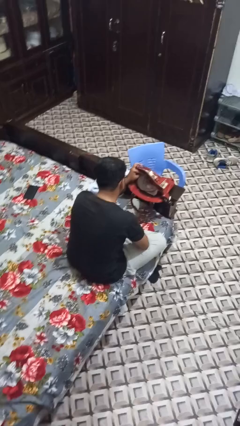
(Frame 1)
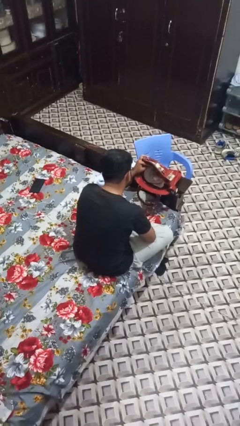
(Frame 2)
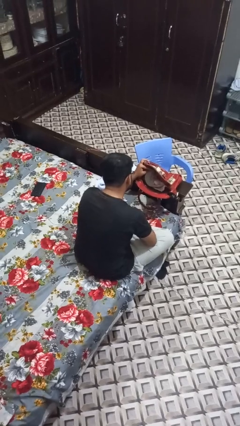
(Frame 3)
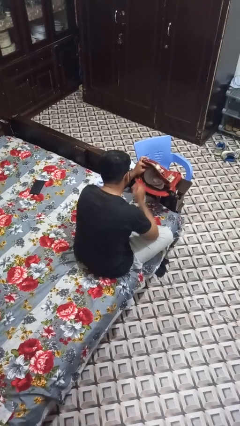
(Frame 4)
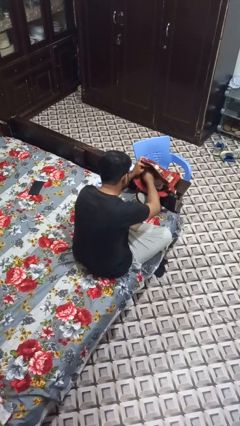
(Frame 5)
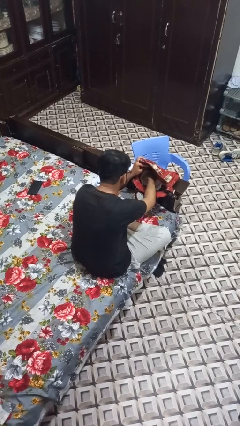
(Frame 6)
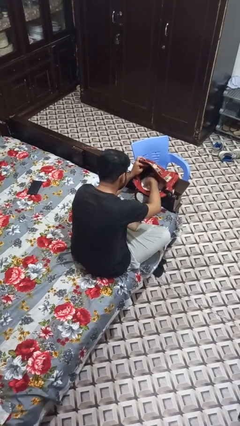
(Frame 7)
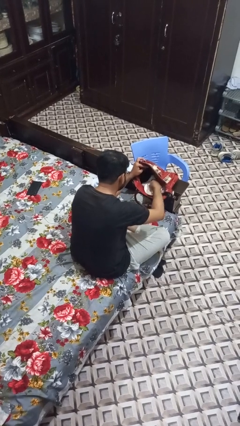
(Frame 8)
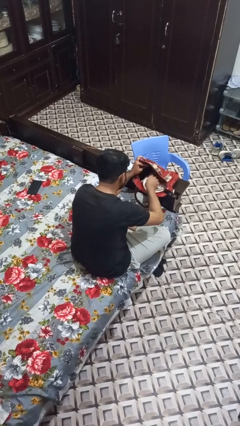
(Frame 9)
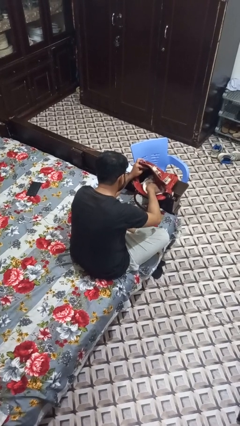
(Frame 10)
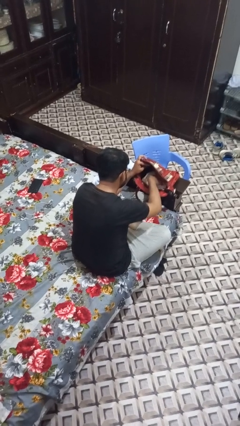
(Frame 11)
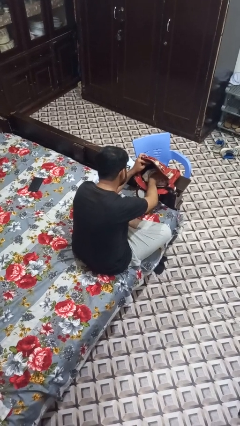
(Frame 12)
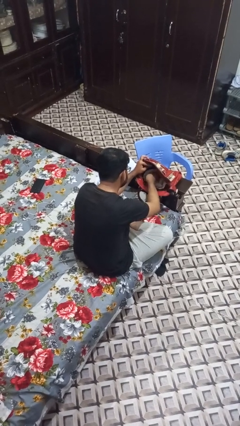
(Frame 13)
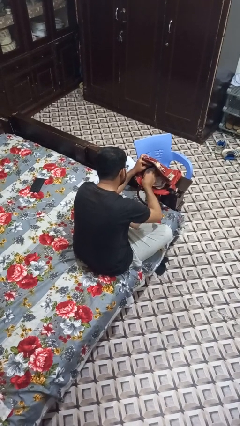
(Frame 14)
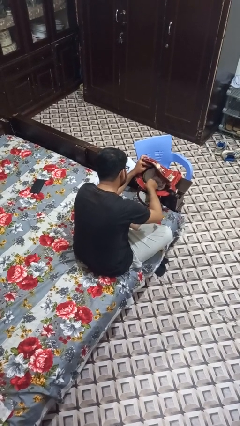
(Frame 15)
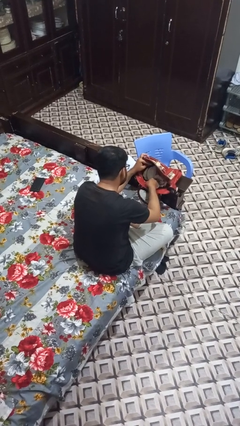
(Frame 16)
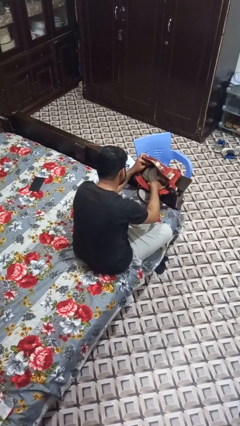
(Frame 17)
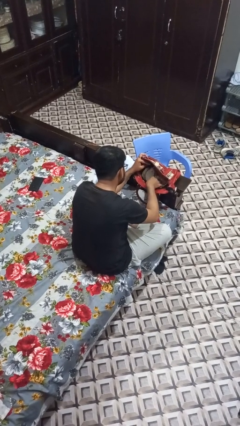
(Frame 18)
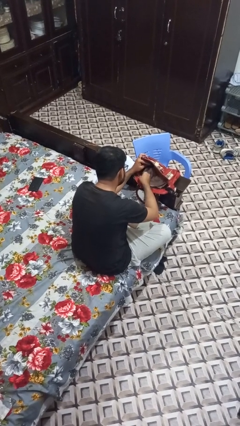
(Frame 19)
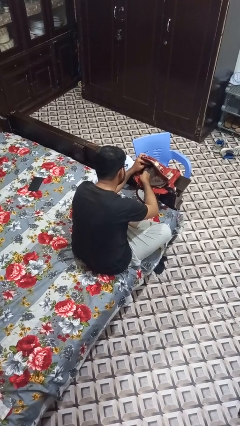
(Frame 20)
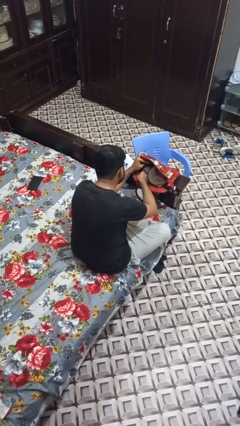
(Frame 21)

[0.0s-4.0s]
person searches in purse

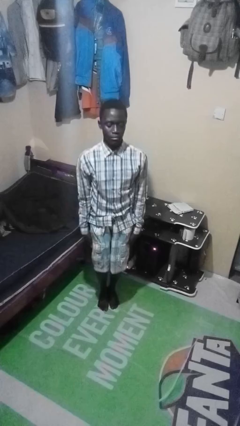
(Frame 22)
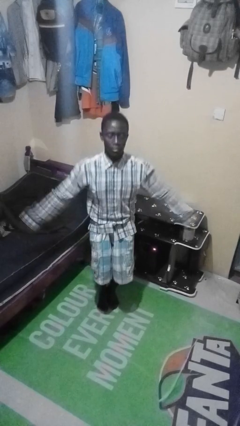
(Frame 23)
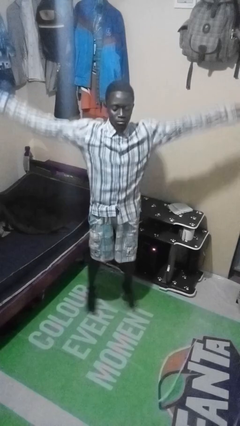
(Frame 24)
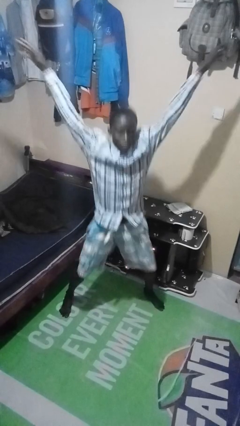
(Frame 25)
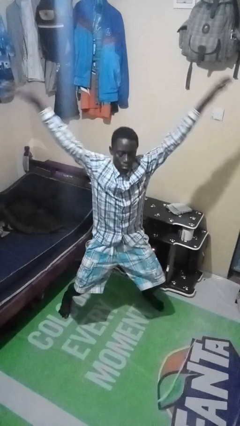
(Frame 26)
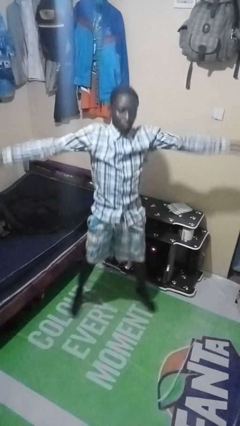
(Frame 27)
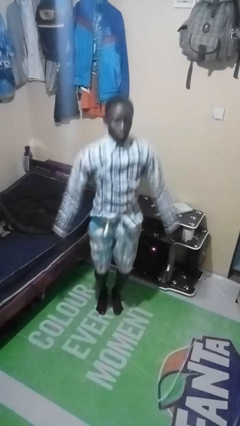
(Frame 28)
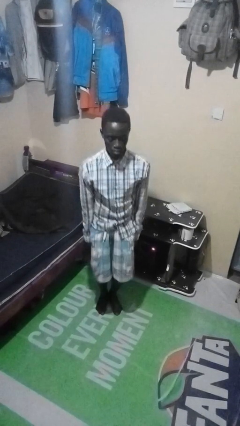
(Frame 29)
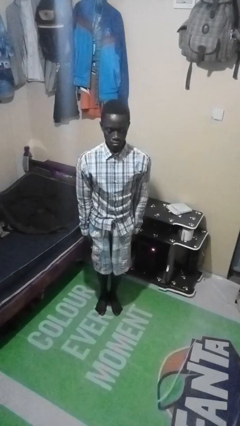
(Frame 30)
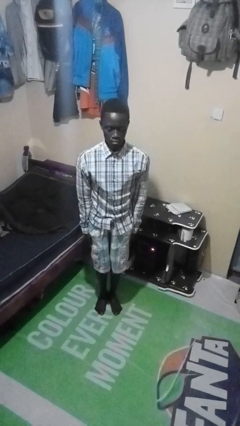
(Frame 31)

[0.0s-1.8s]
person exercises with jumping jacks

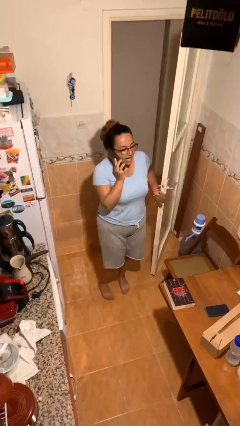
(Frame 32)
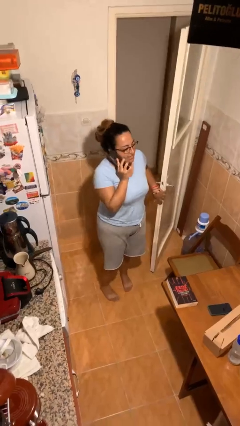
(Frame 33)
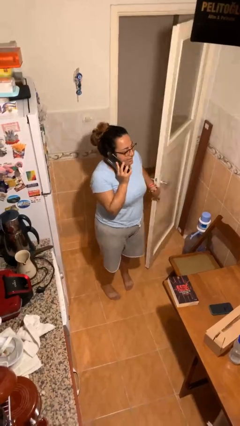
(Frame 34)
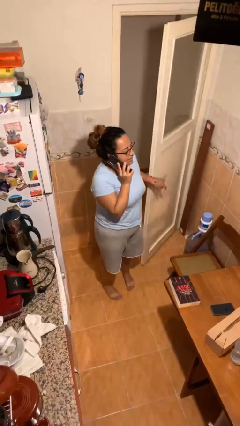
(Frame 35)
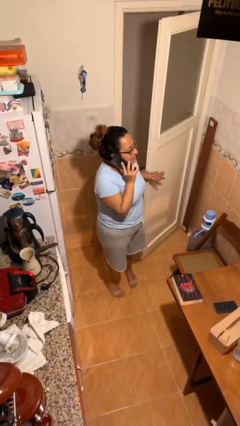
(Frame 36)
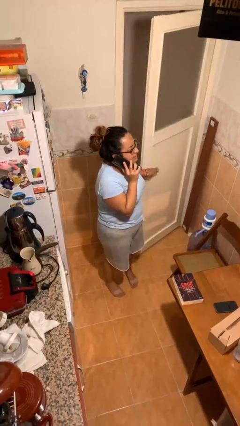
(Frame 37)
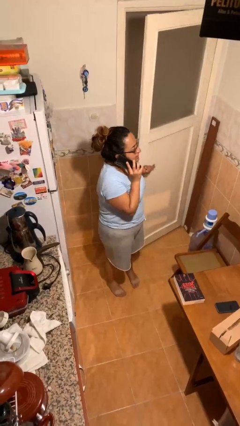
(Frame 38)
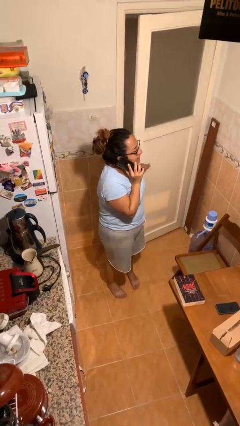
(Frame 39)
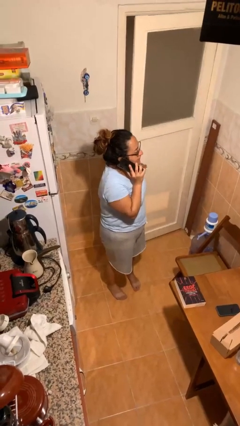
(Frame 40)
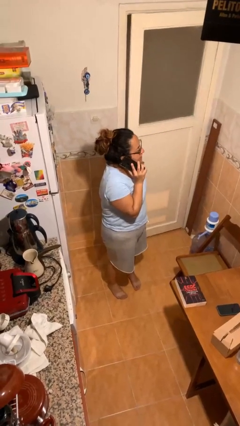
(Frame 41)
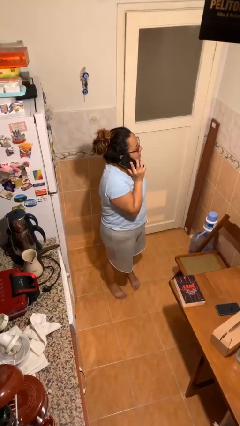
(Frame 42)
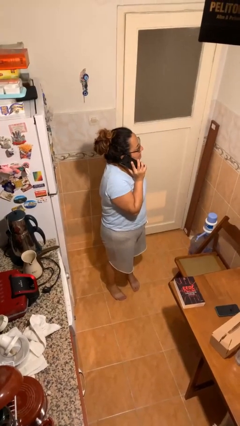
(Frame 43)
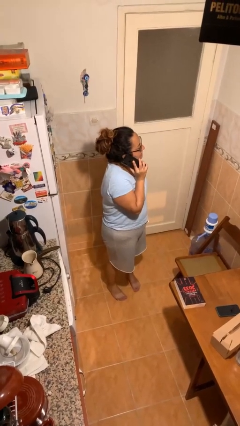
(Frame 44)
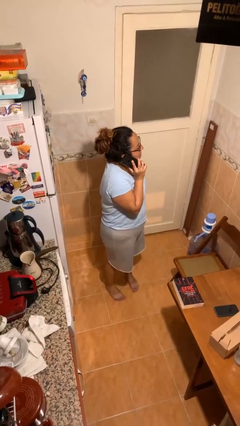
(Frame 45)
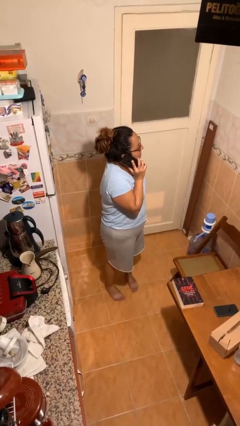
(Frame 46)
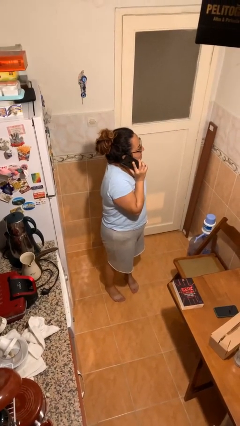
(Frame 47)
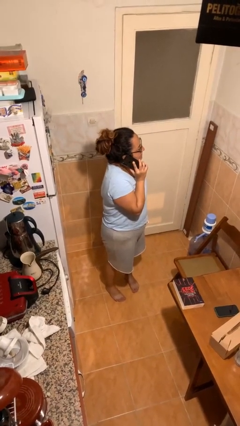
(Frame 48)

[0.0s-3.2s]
person closes facility door

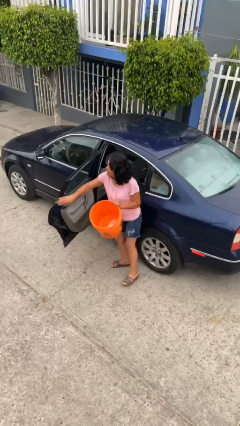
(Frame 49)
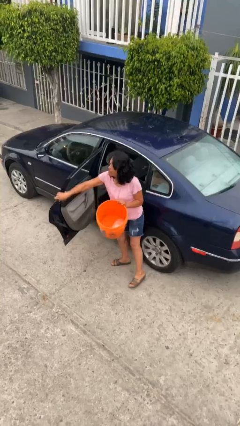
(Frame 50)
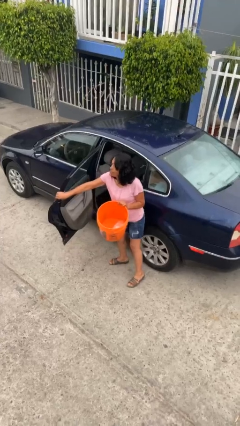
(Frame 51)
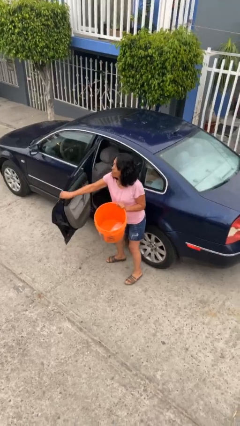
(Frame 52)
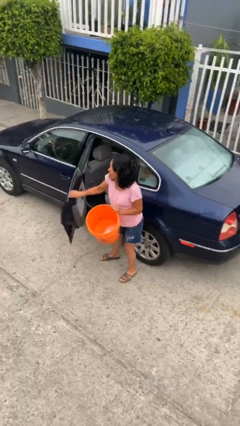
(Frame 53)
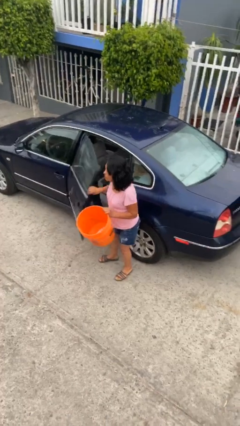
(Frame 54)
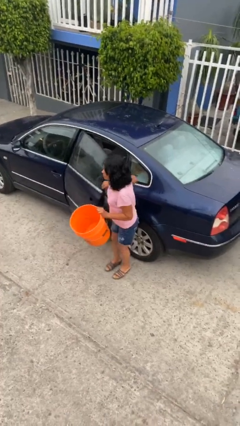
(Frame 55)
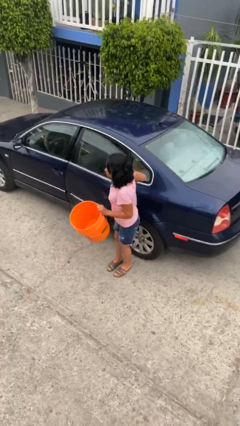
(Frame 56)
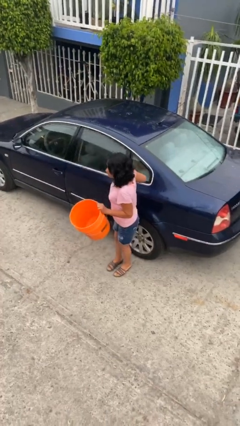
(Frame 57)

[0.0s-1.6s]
person closes car door

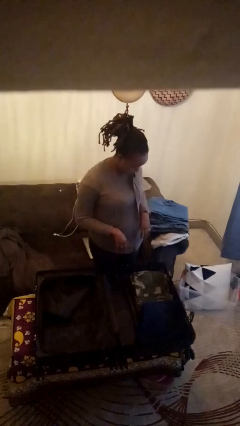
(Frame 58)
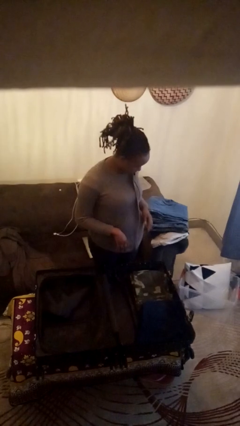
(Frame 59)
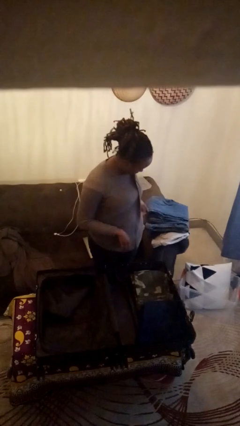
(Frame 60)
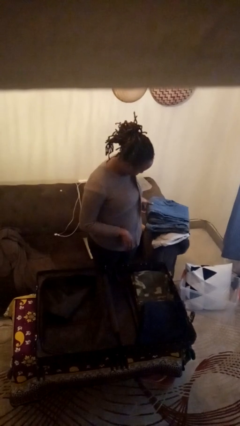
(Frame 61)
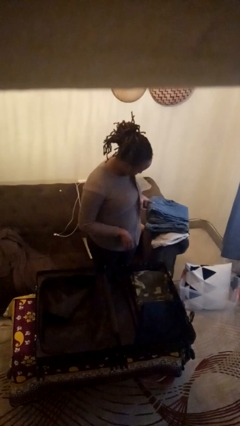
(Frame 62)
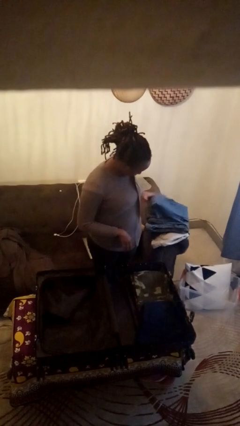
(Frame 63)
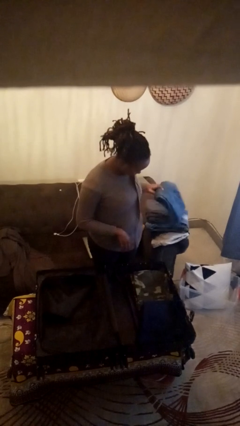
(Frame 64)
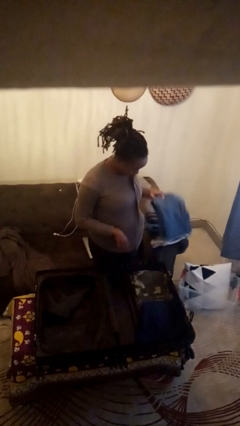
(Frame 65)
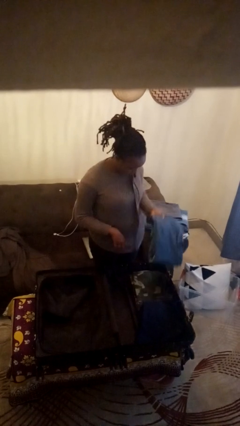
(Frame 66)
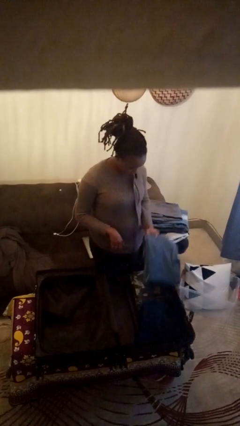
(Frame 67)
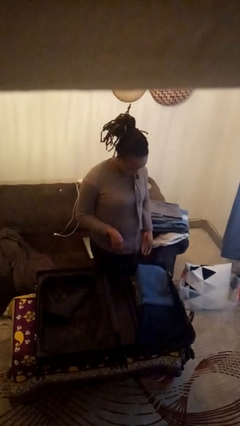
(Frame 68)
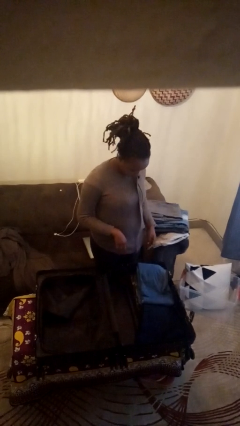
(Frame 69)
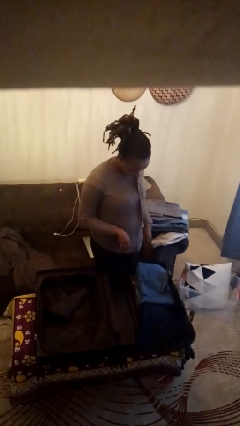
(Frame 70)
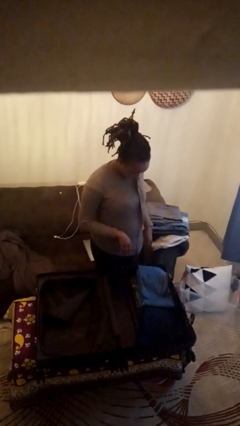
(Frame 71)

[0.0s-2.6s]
person loads clothes into suitcase

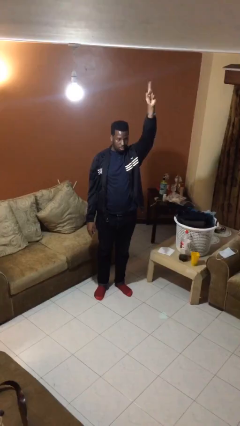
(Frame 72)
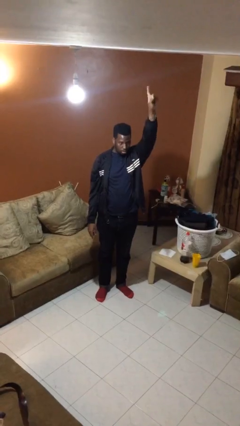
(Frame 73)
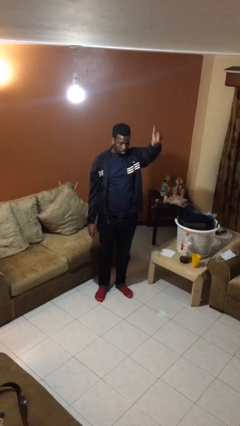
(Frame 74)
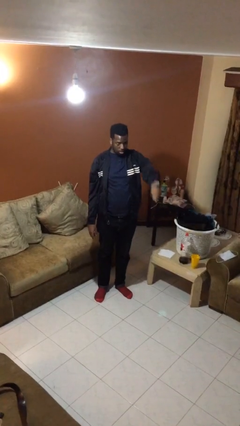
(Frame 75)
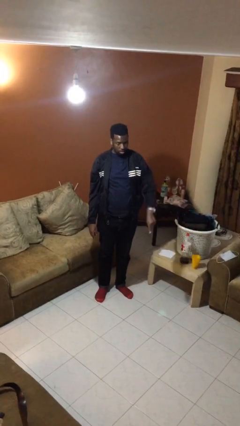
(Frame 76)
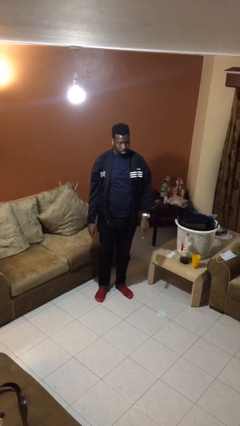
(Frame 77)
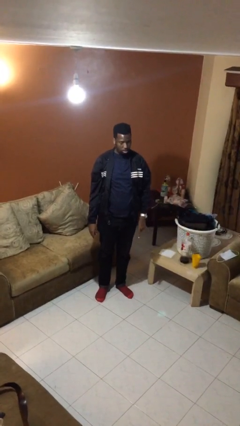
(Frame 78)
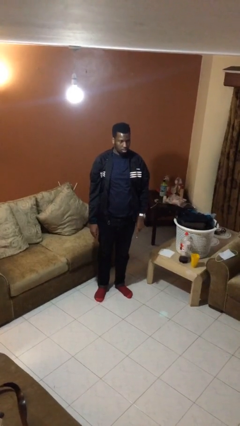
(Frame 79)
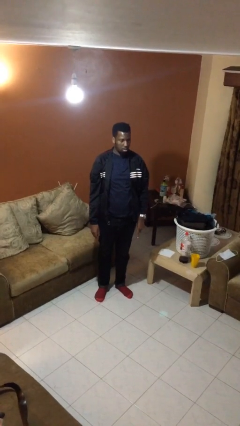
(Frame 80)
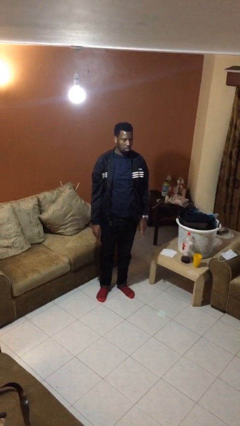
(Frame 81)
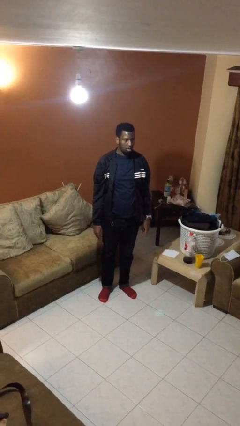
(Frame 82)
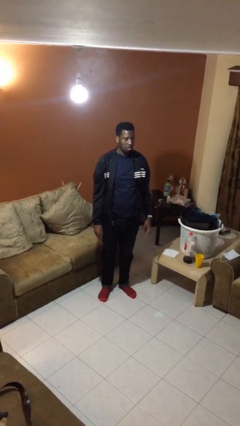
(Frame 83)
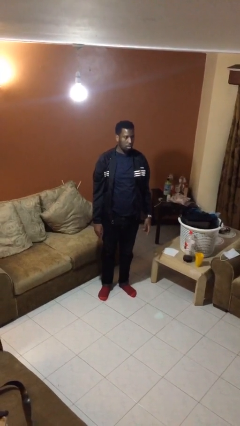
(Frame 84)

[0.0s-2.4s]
person gestures swipe down

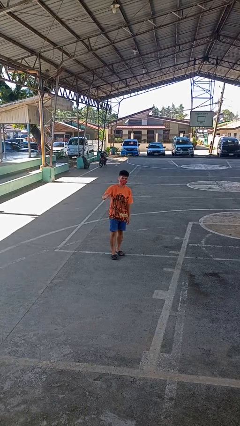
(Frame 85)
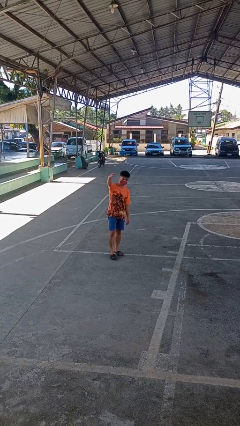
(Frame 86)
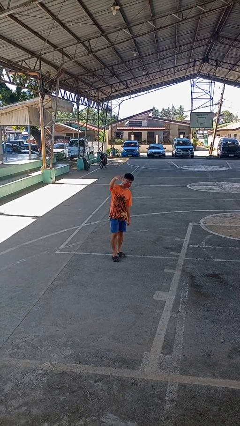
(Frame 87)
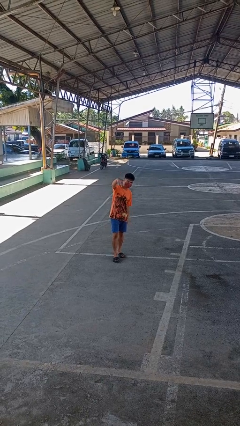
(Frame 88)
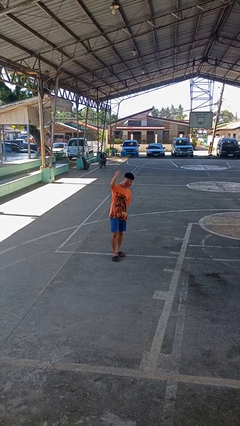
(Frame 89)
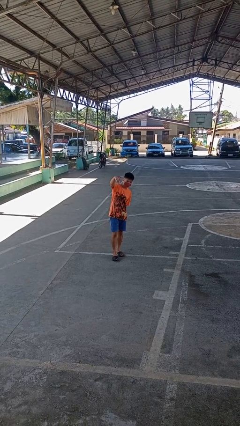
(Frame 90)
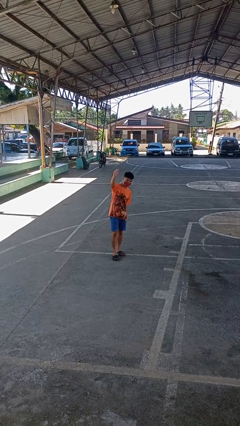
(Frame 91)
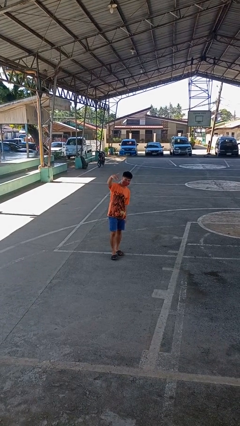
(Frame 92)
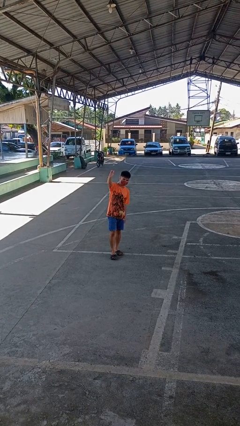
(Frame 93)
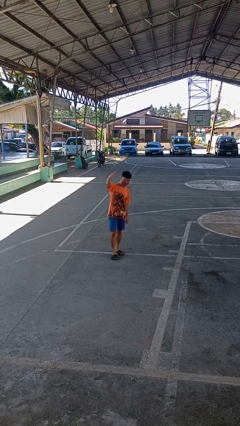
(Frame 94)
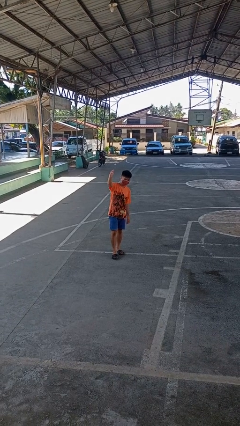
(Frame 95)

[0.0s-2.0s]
person gestures come here
